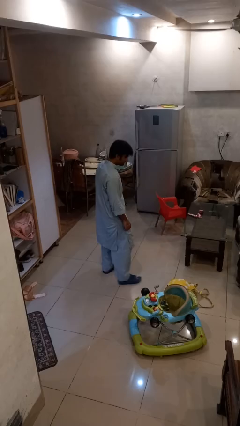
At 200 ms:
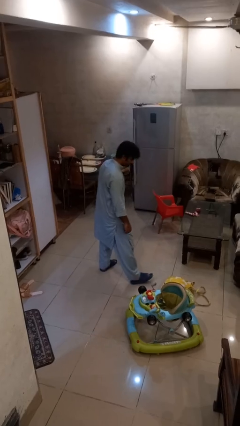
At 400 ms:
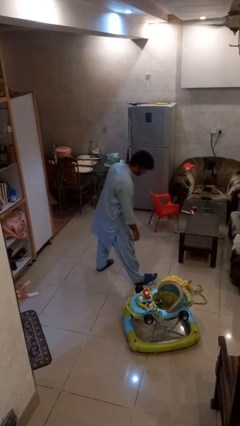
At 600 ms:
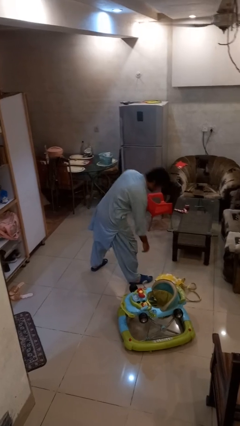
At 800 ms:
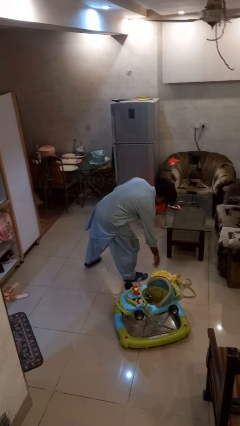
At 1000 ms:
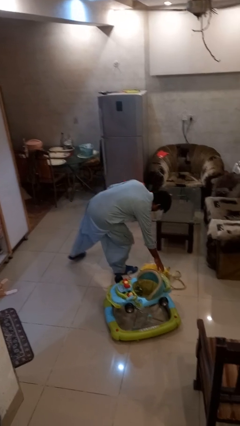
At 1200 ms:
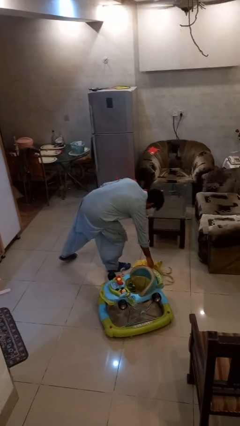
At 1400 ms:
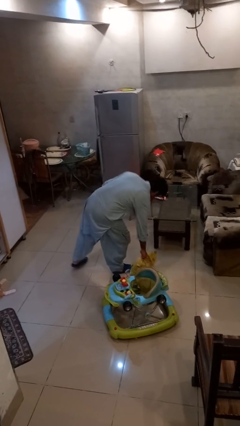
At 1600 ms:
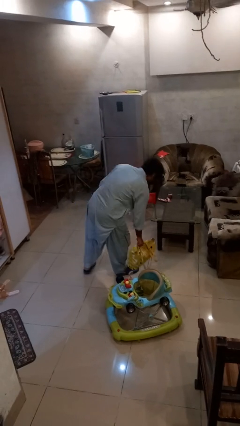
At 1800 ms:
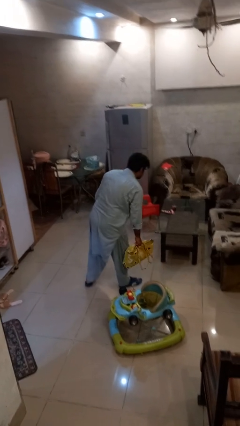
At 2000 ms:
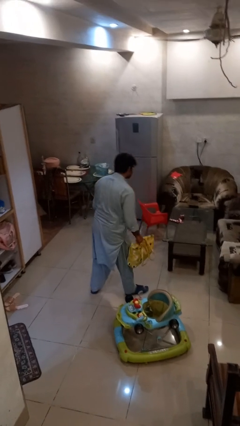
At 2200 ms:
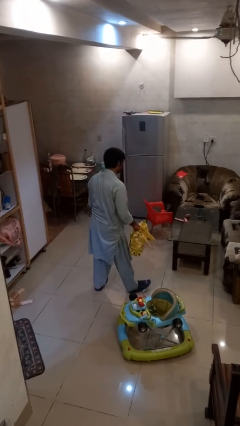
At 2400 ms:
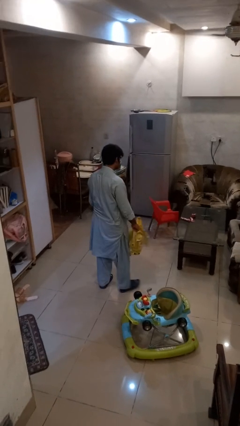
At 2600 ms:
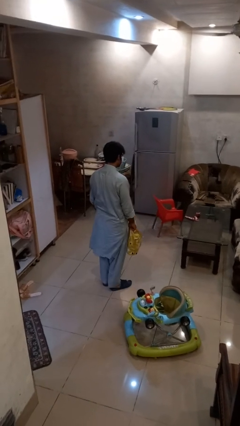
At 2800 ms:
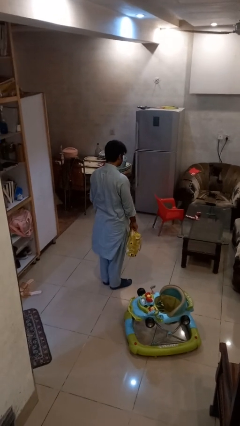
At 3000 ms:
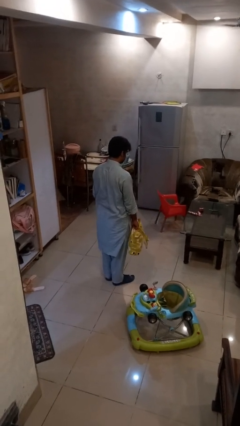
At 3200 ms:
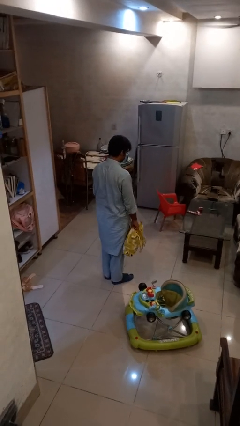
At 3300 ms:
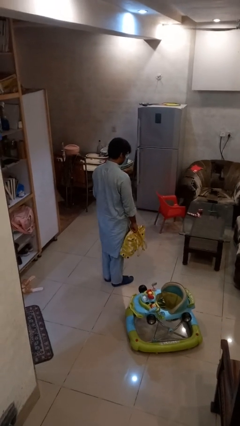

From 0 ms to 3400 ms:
person picks up object from floor

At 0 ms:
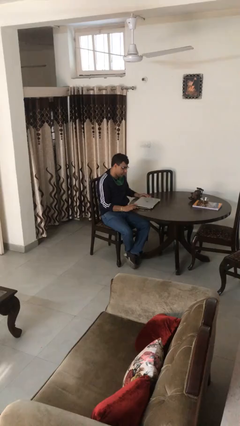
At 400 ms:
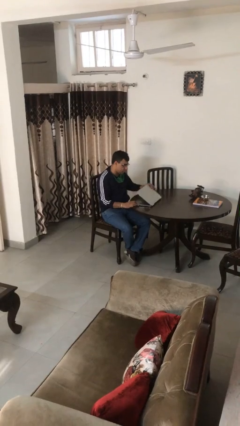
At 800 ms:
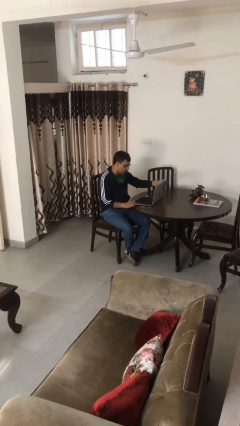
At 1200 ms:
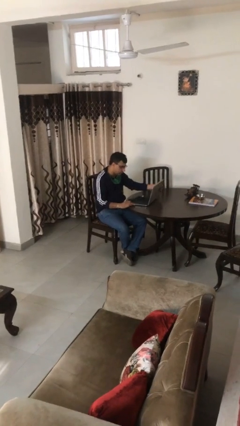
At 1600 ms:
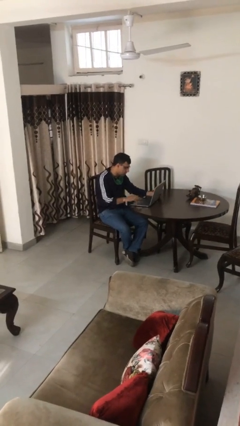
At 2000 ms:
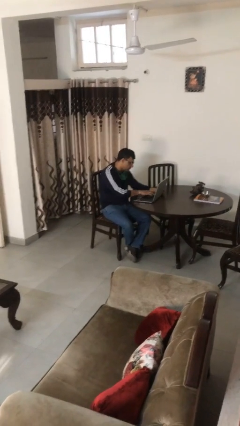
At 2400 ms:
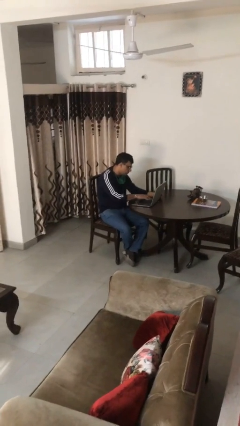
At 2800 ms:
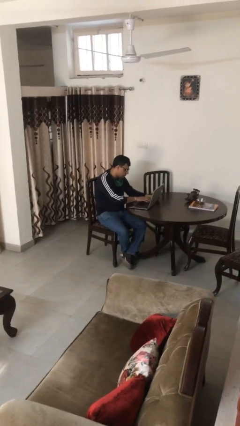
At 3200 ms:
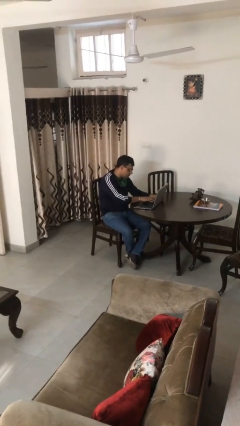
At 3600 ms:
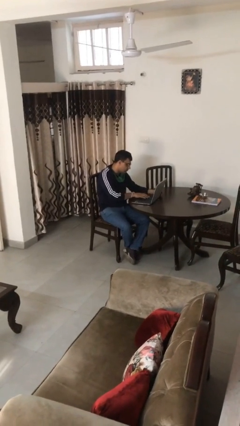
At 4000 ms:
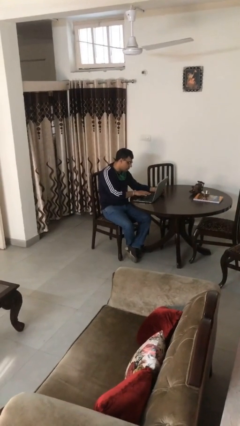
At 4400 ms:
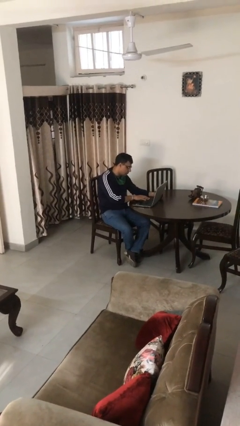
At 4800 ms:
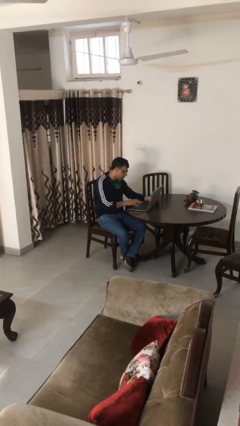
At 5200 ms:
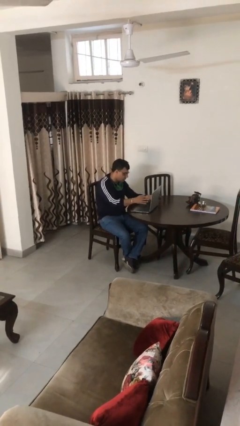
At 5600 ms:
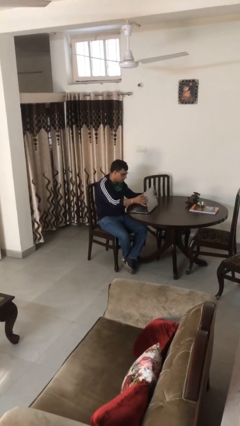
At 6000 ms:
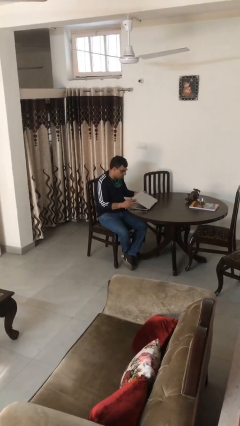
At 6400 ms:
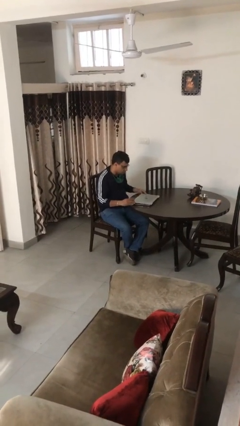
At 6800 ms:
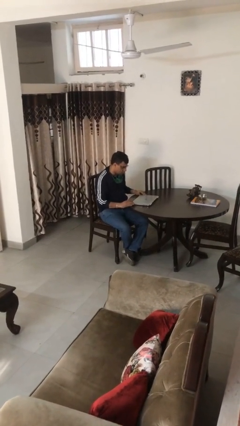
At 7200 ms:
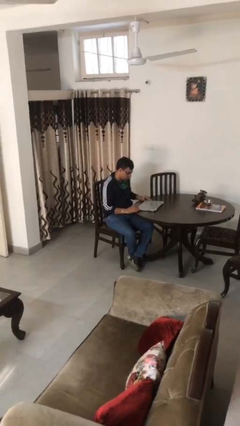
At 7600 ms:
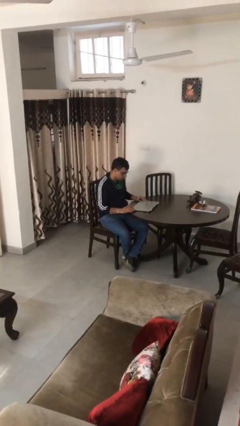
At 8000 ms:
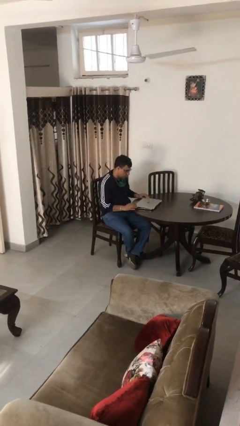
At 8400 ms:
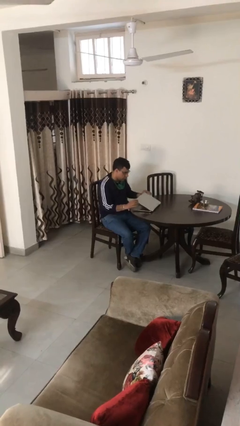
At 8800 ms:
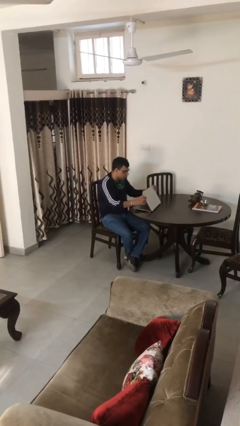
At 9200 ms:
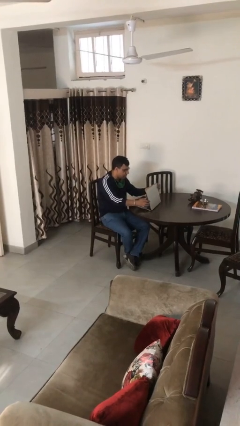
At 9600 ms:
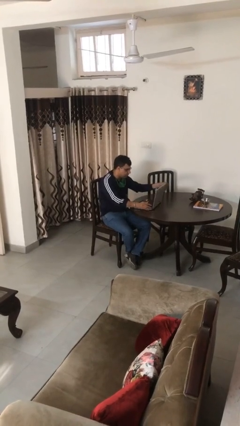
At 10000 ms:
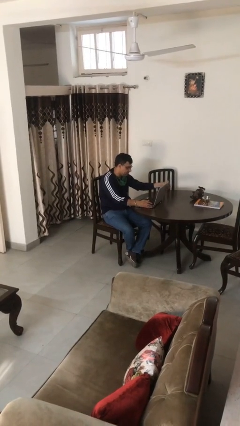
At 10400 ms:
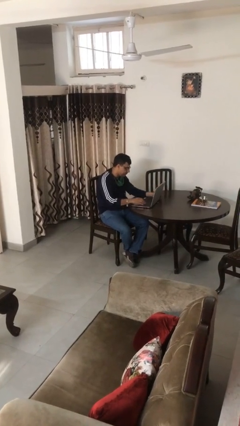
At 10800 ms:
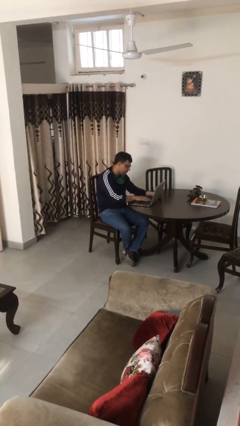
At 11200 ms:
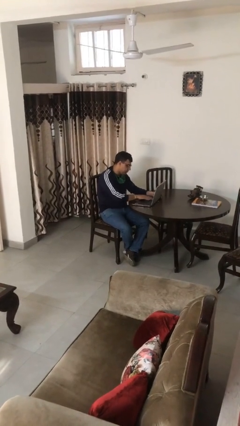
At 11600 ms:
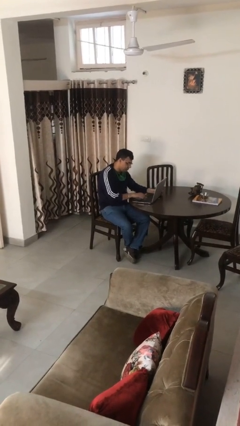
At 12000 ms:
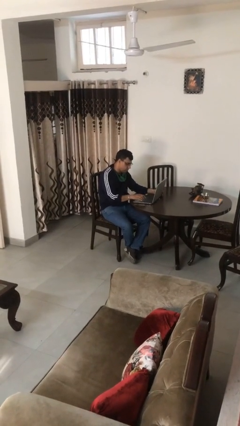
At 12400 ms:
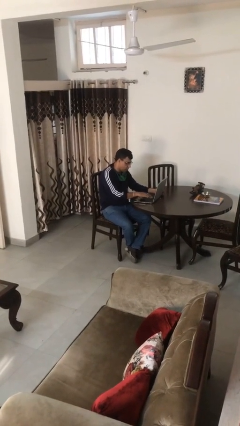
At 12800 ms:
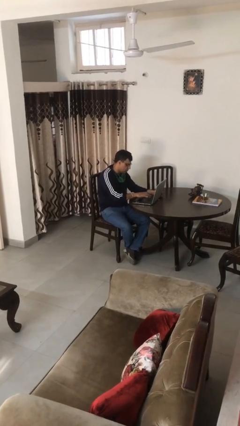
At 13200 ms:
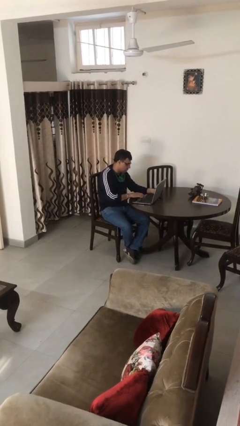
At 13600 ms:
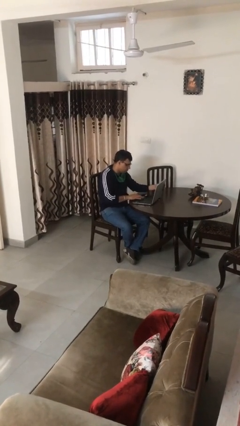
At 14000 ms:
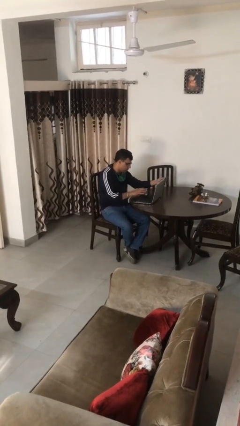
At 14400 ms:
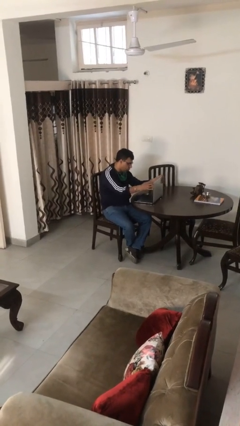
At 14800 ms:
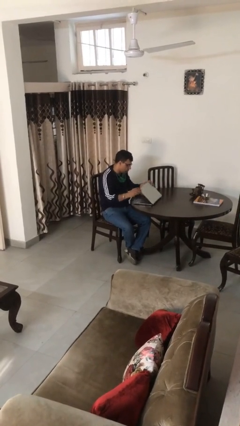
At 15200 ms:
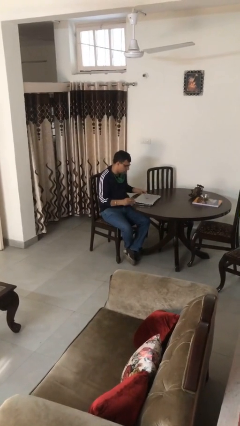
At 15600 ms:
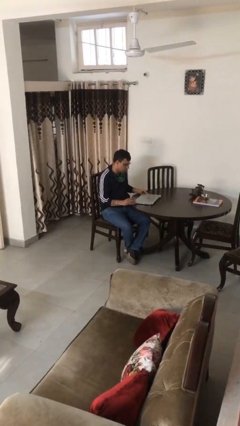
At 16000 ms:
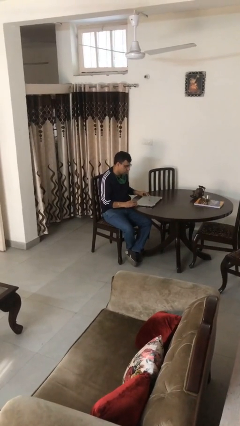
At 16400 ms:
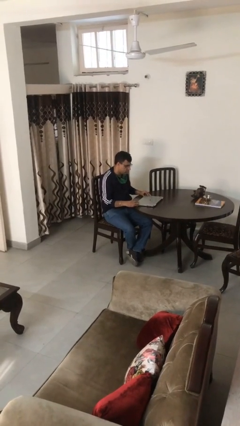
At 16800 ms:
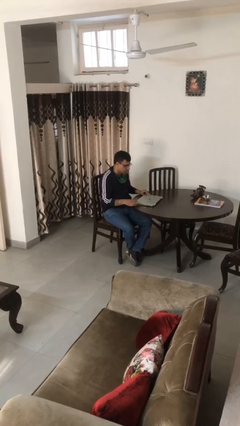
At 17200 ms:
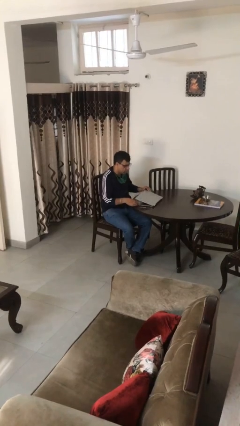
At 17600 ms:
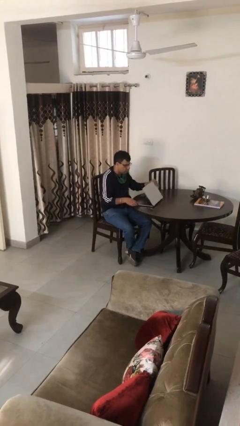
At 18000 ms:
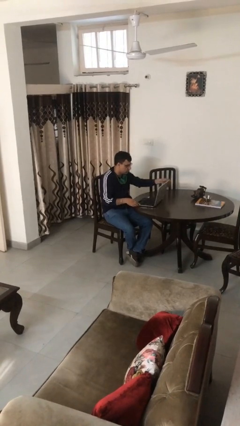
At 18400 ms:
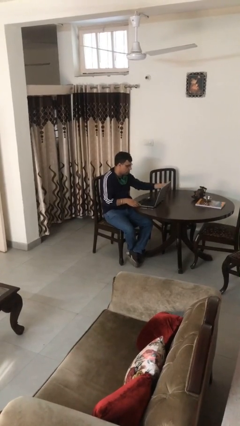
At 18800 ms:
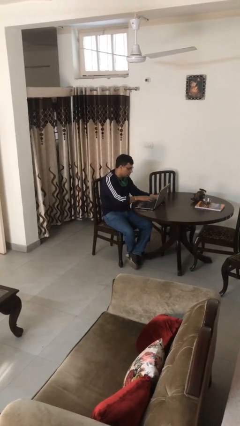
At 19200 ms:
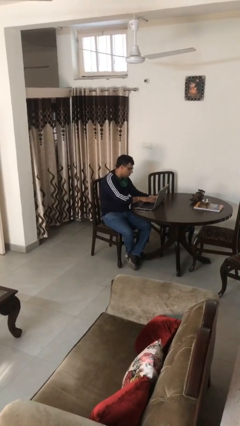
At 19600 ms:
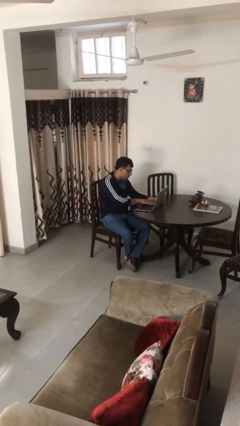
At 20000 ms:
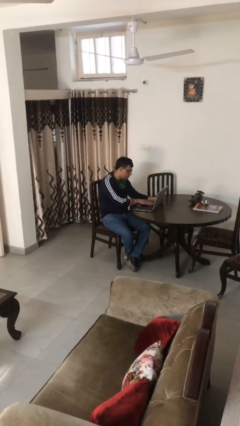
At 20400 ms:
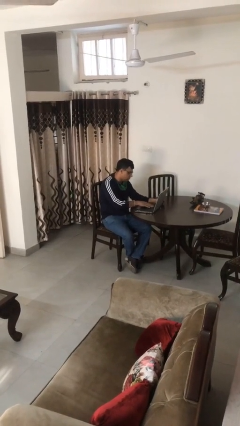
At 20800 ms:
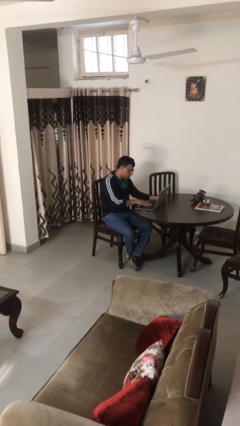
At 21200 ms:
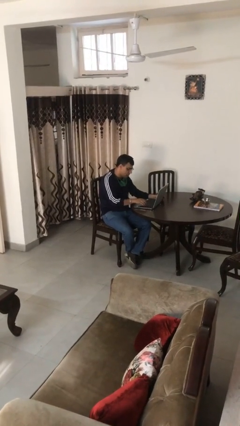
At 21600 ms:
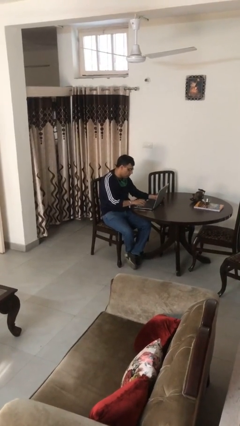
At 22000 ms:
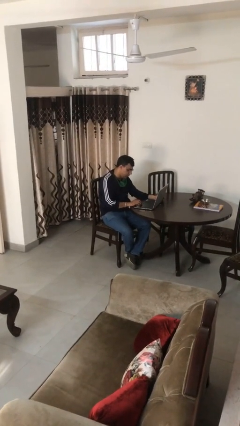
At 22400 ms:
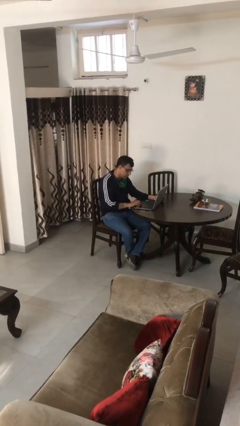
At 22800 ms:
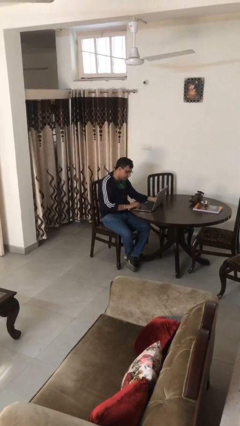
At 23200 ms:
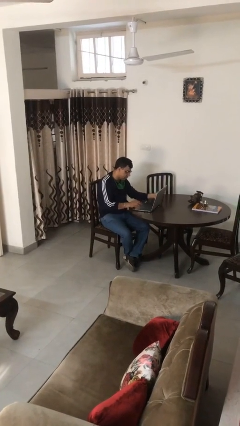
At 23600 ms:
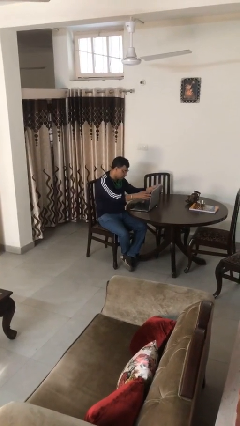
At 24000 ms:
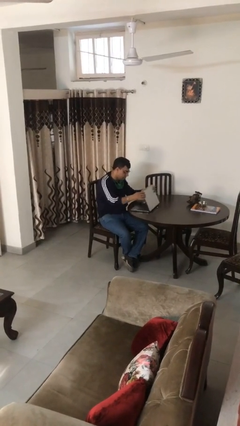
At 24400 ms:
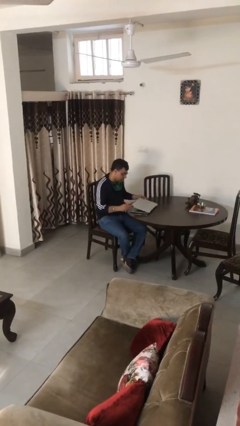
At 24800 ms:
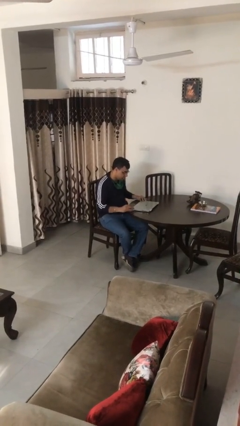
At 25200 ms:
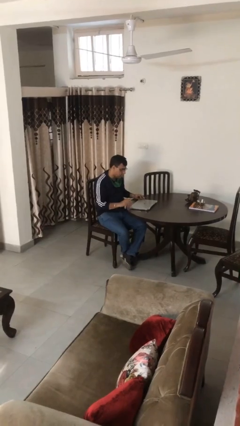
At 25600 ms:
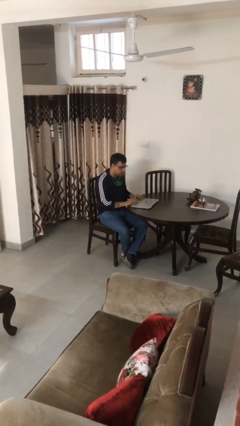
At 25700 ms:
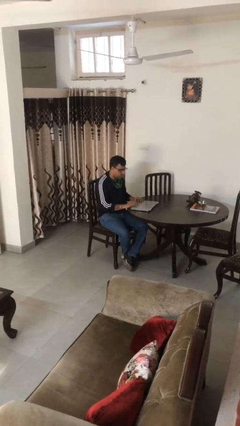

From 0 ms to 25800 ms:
person interacts with laptop

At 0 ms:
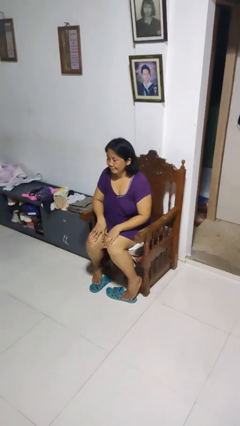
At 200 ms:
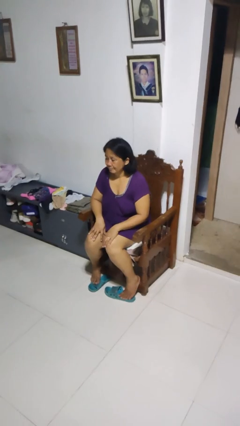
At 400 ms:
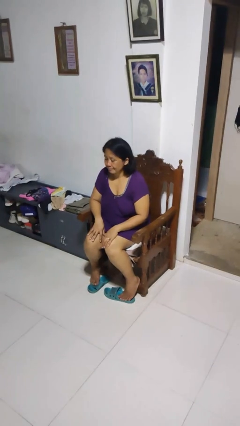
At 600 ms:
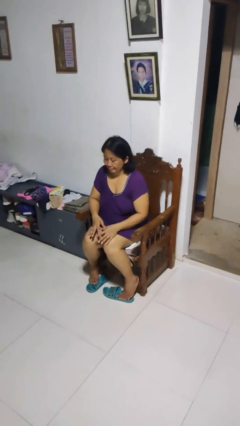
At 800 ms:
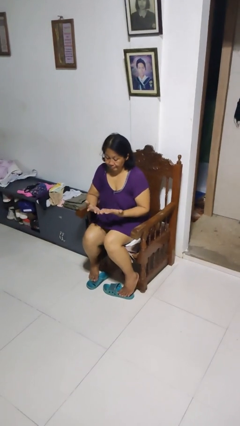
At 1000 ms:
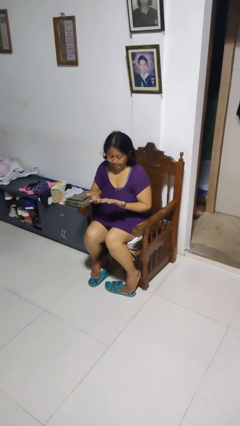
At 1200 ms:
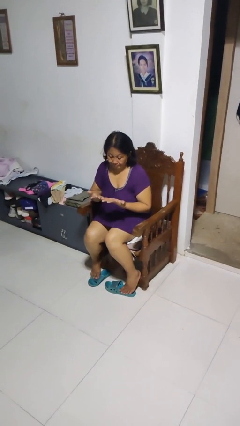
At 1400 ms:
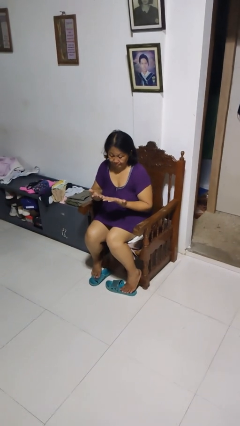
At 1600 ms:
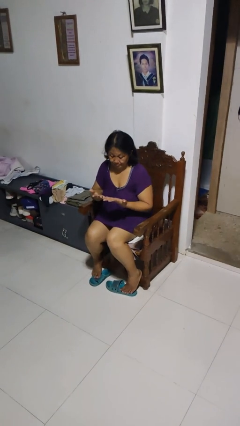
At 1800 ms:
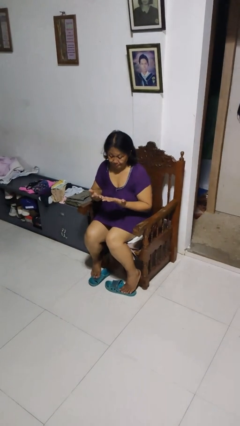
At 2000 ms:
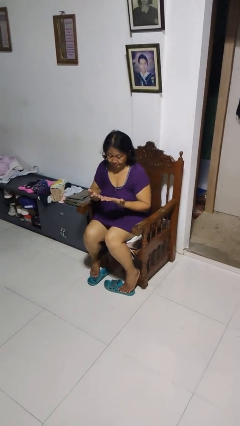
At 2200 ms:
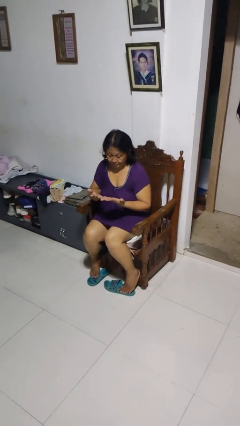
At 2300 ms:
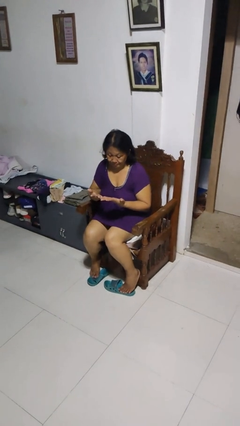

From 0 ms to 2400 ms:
person looks at hands in lap
